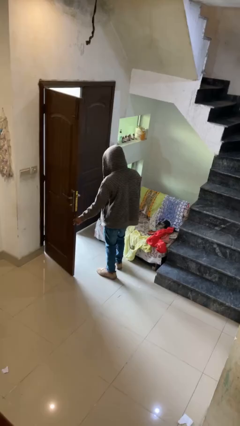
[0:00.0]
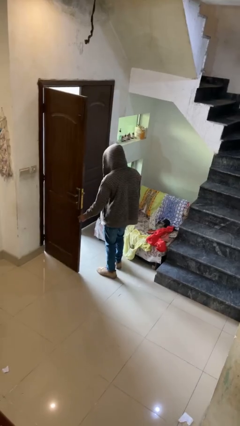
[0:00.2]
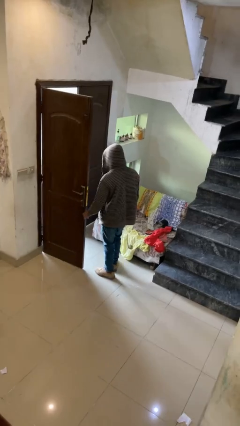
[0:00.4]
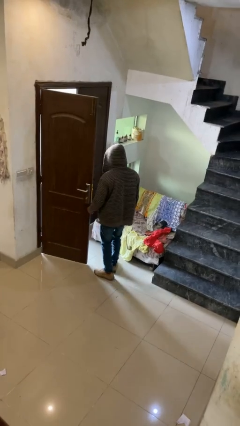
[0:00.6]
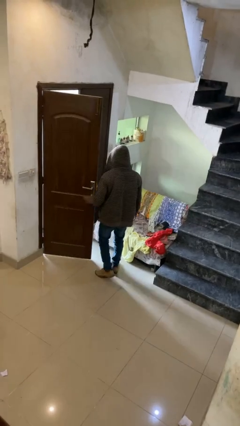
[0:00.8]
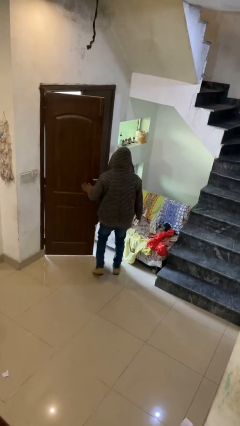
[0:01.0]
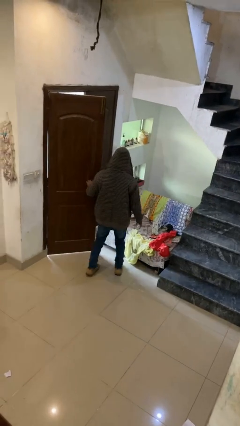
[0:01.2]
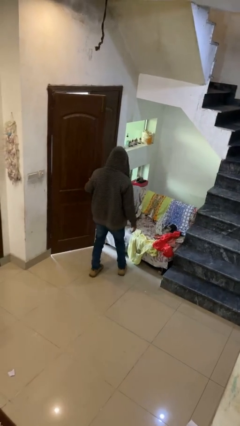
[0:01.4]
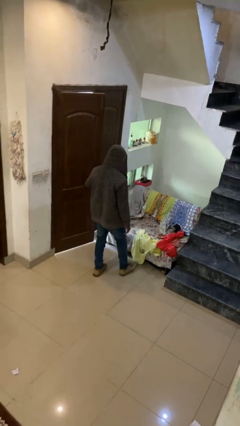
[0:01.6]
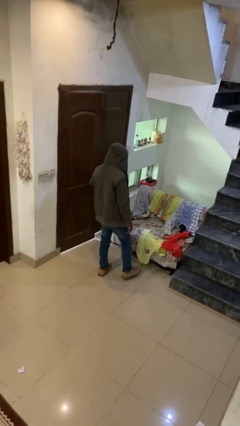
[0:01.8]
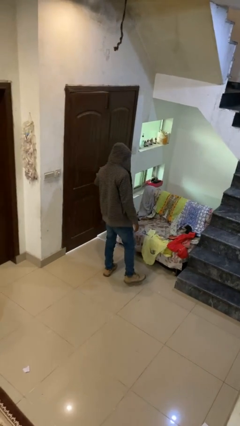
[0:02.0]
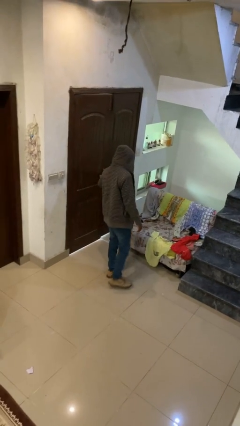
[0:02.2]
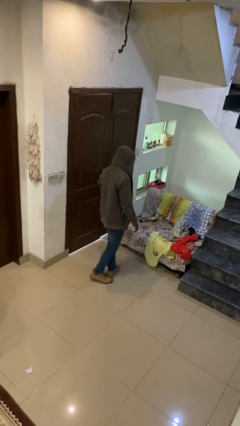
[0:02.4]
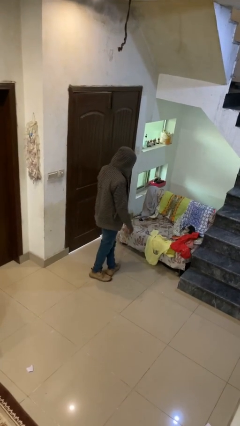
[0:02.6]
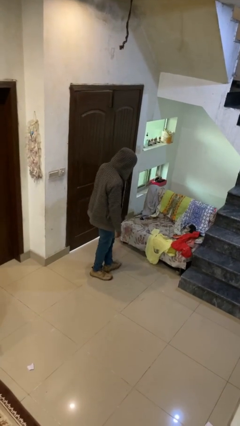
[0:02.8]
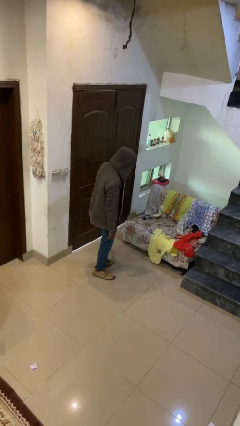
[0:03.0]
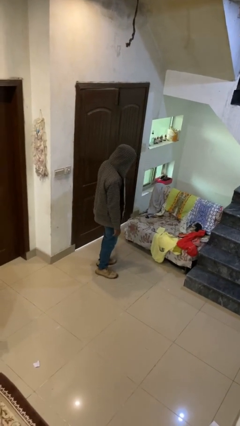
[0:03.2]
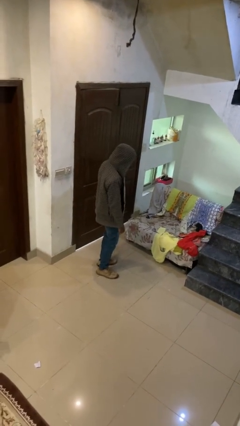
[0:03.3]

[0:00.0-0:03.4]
person closes facility door

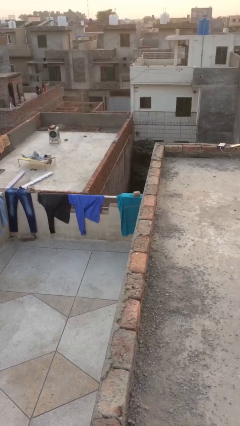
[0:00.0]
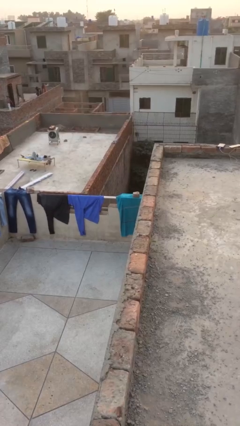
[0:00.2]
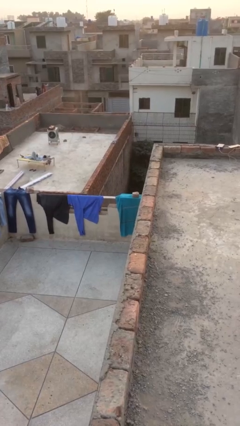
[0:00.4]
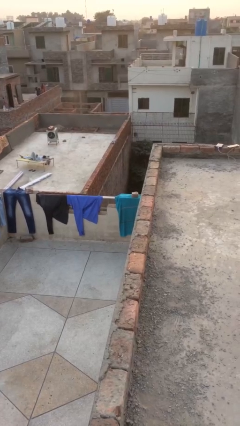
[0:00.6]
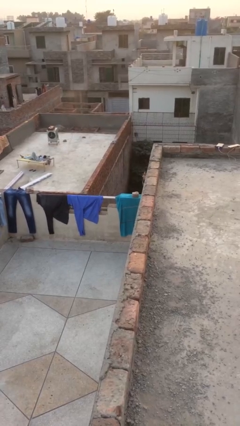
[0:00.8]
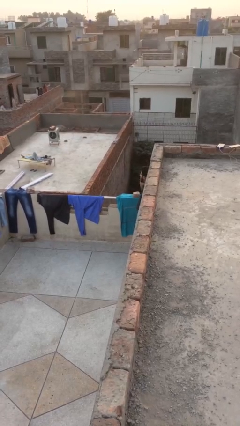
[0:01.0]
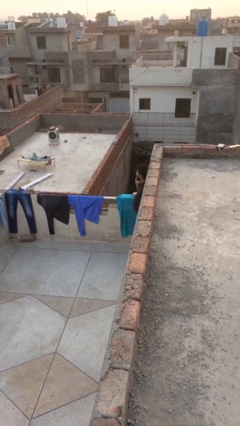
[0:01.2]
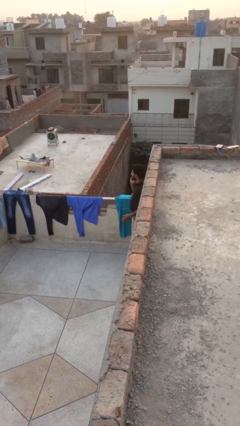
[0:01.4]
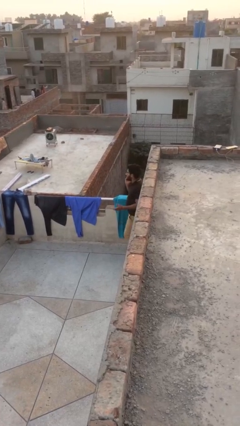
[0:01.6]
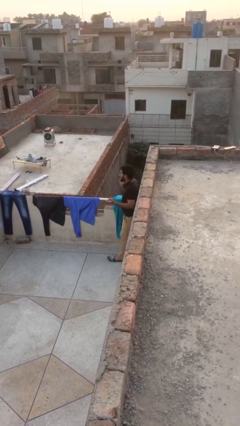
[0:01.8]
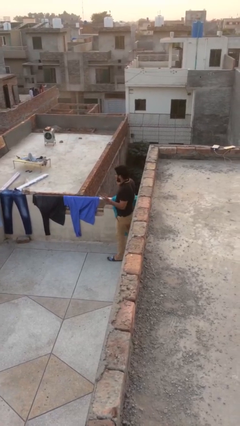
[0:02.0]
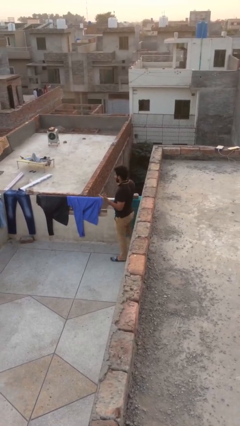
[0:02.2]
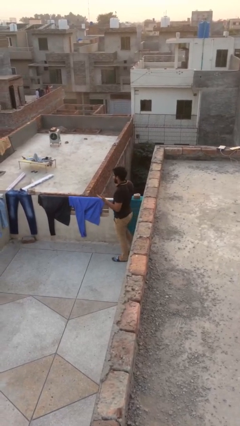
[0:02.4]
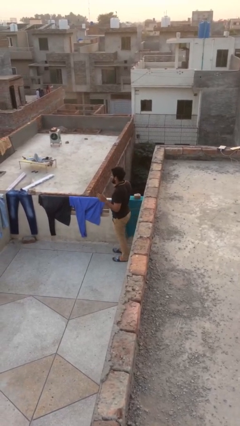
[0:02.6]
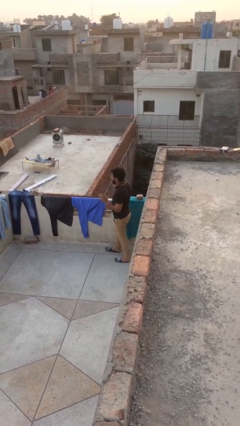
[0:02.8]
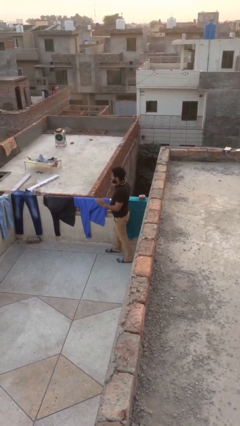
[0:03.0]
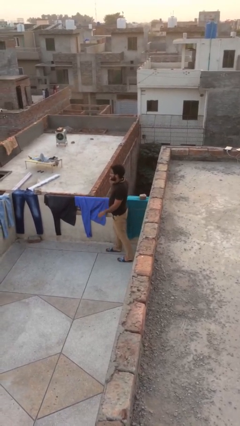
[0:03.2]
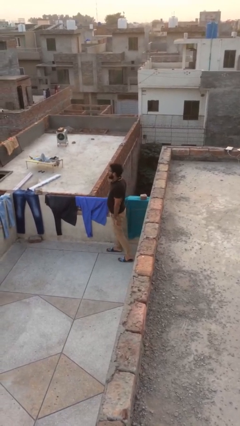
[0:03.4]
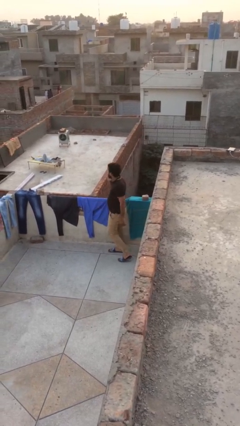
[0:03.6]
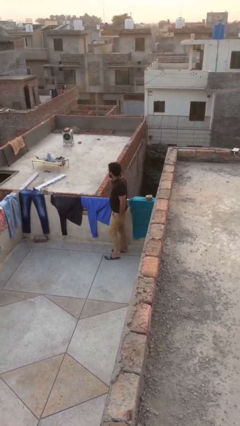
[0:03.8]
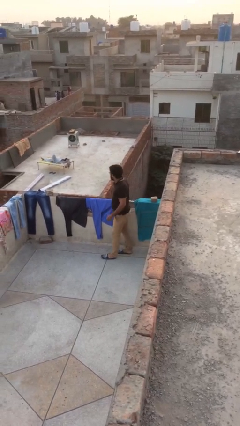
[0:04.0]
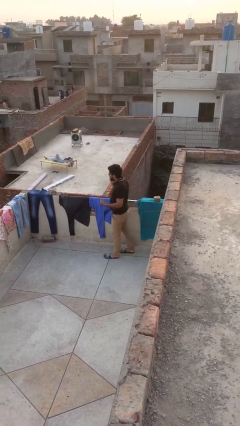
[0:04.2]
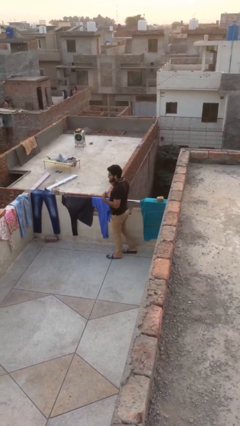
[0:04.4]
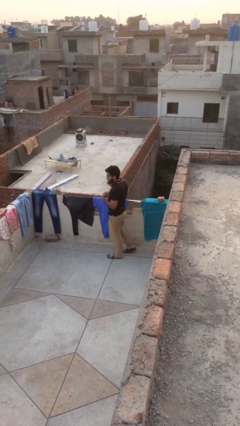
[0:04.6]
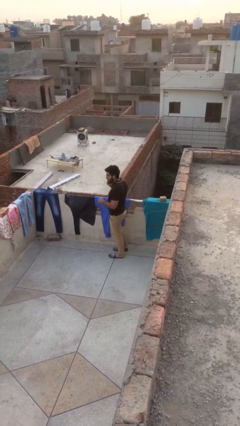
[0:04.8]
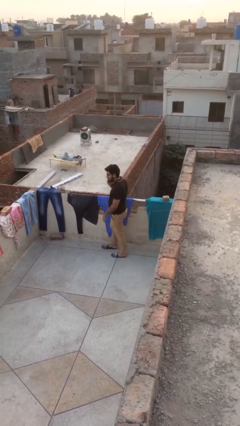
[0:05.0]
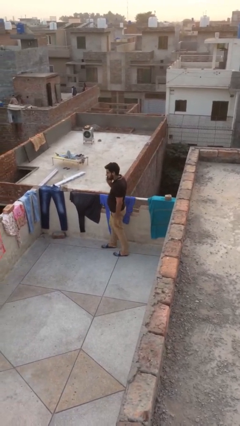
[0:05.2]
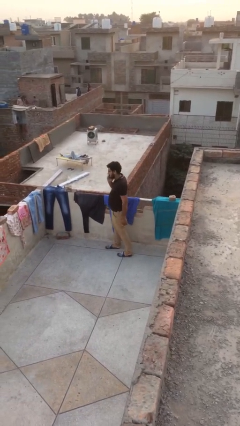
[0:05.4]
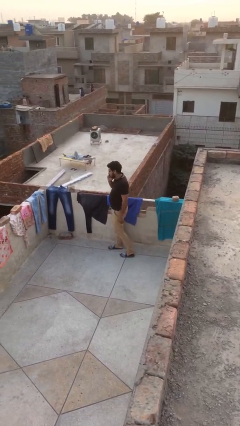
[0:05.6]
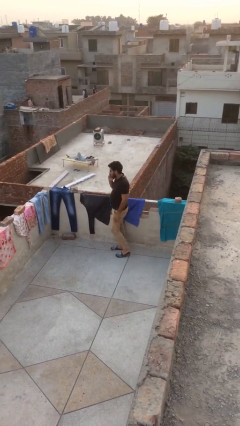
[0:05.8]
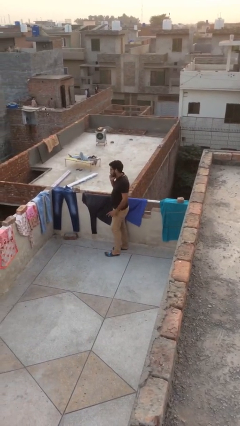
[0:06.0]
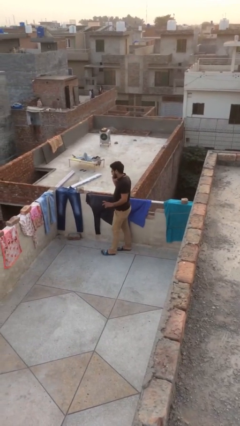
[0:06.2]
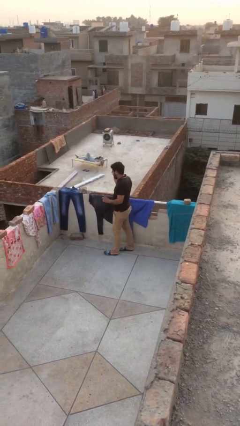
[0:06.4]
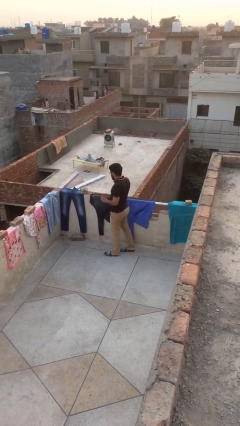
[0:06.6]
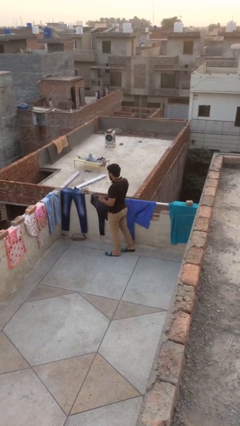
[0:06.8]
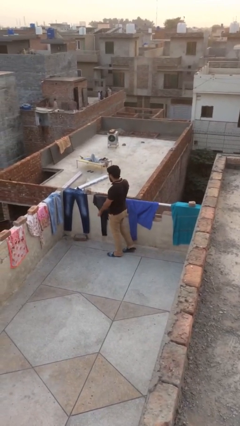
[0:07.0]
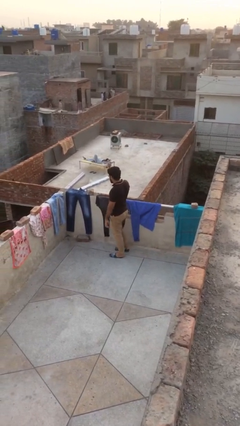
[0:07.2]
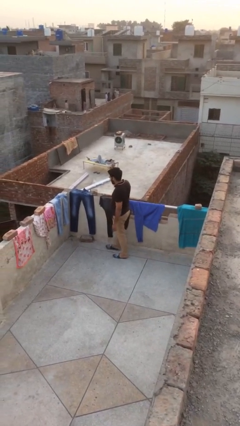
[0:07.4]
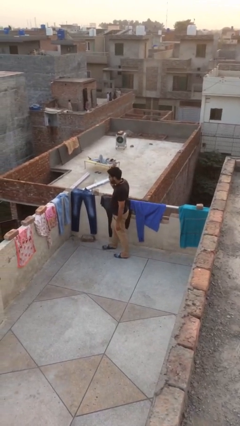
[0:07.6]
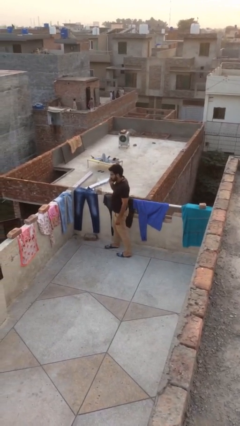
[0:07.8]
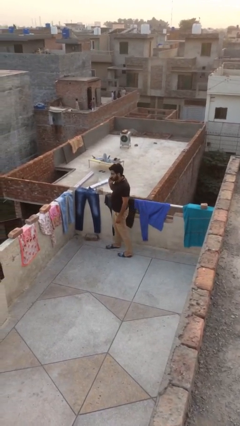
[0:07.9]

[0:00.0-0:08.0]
person enters scene through structure

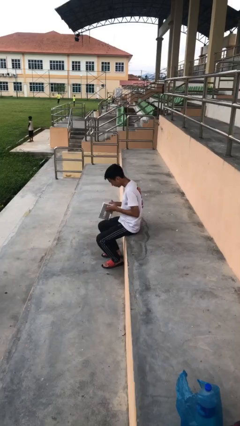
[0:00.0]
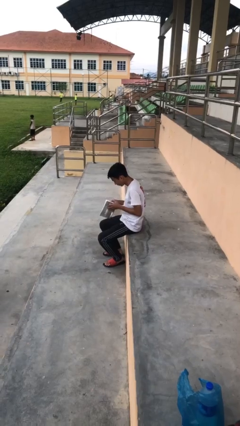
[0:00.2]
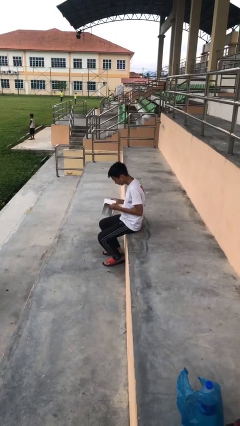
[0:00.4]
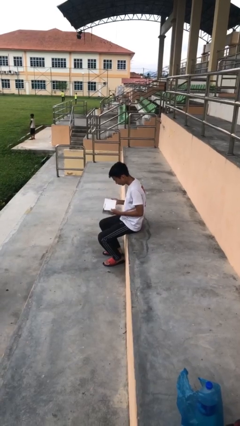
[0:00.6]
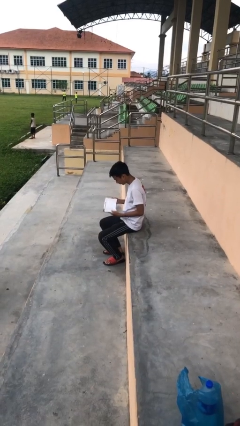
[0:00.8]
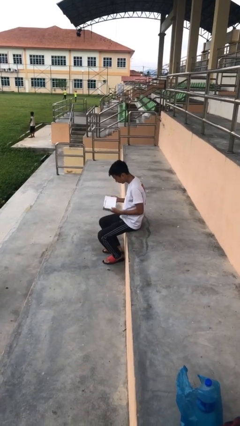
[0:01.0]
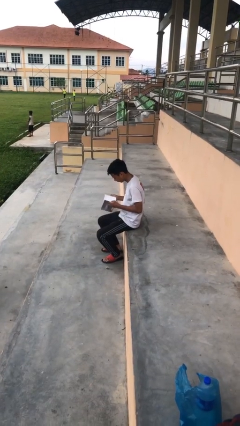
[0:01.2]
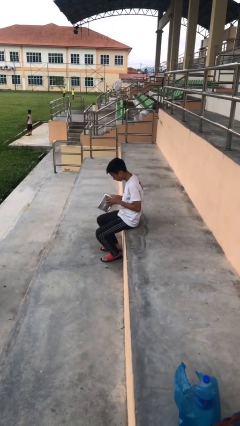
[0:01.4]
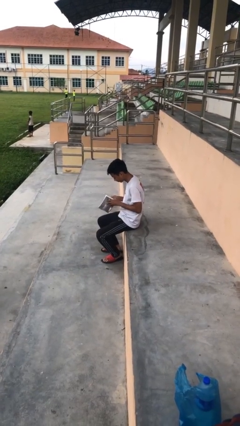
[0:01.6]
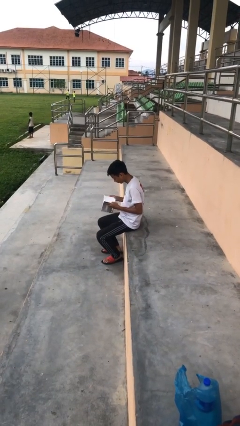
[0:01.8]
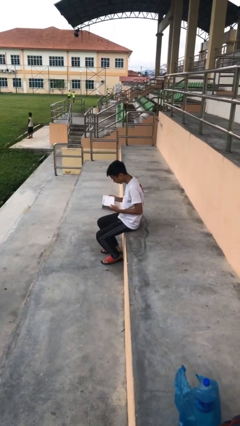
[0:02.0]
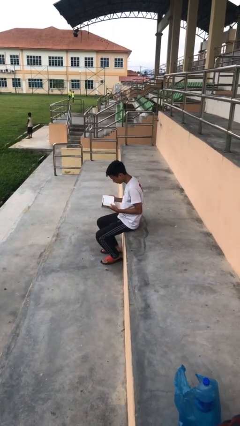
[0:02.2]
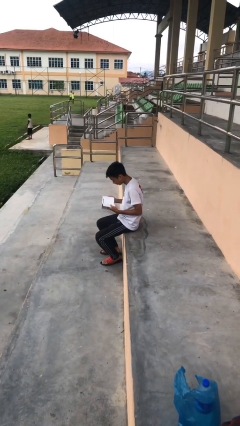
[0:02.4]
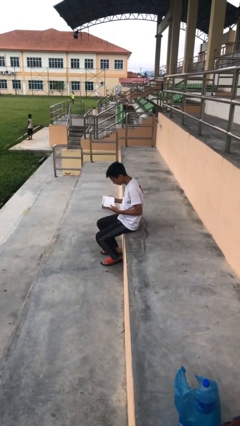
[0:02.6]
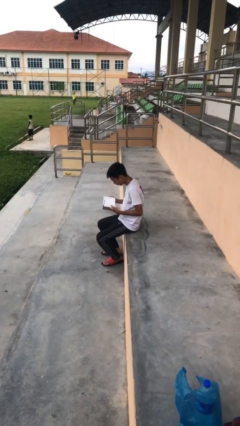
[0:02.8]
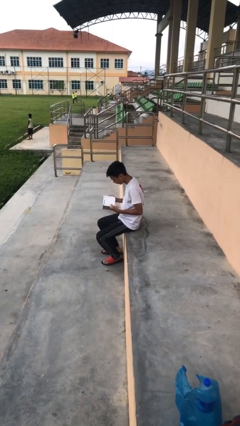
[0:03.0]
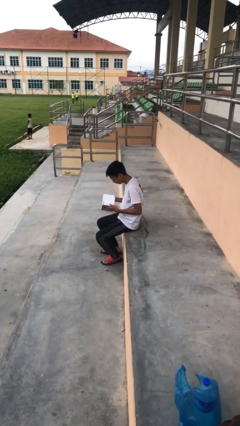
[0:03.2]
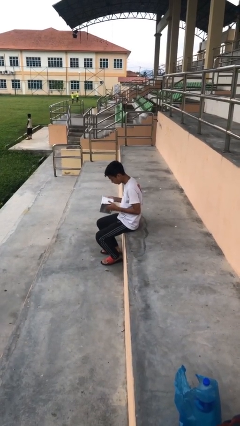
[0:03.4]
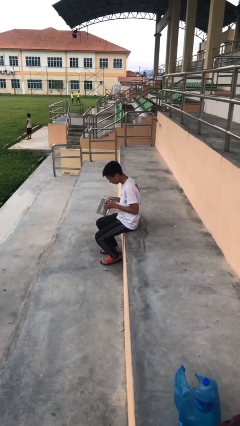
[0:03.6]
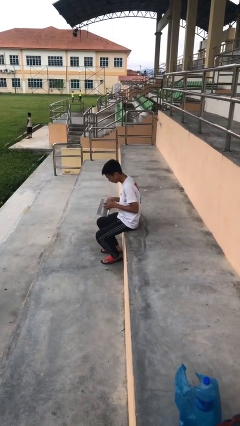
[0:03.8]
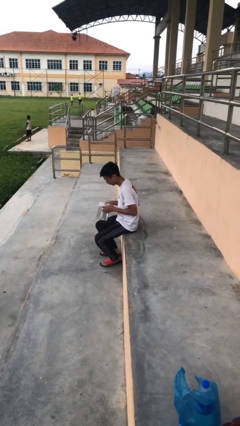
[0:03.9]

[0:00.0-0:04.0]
person reads document

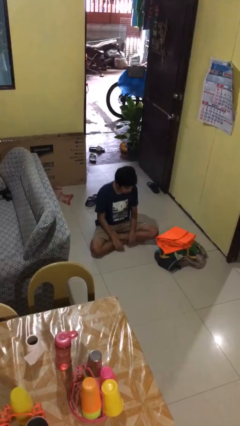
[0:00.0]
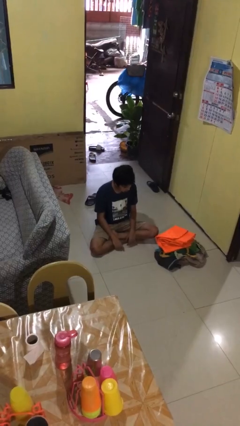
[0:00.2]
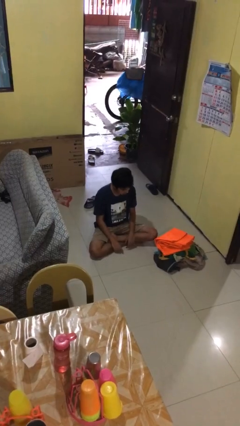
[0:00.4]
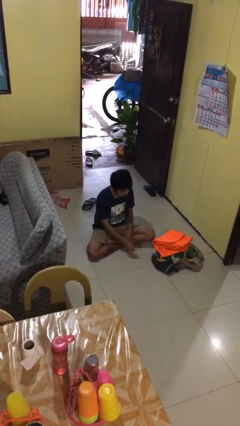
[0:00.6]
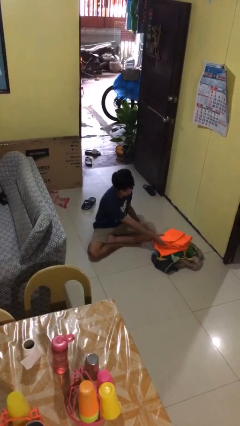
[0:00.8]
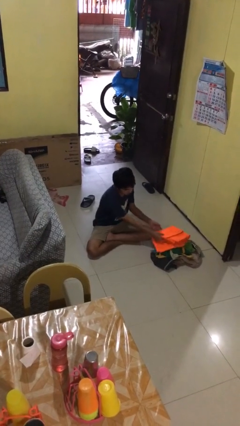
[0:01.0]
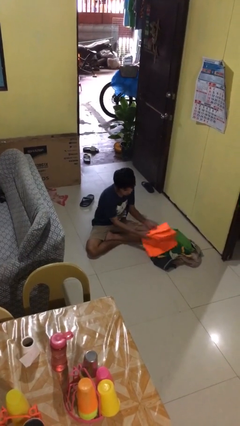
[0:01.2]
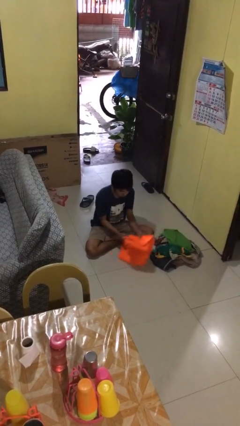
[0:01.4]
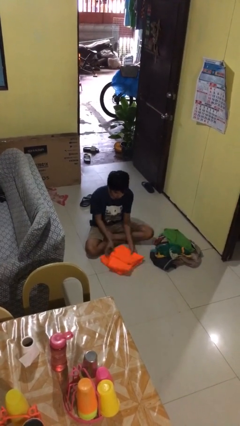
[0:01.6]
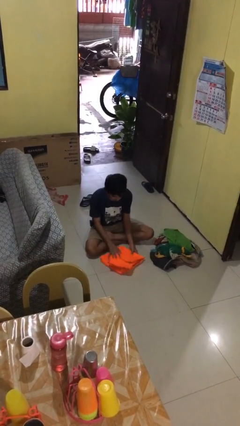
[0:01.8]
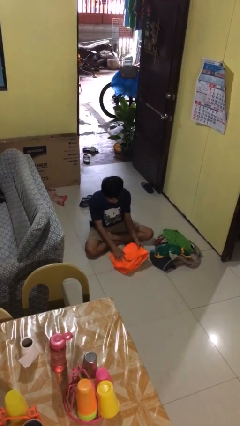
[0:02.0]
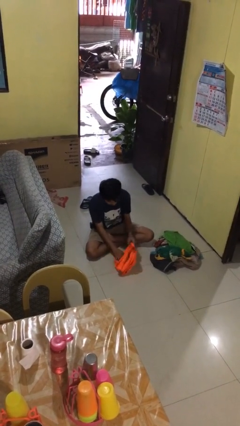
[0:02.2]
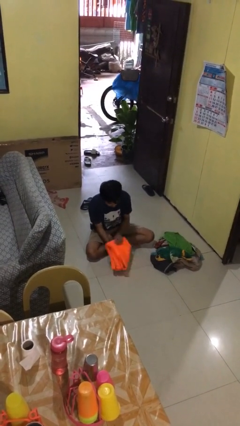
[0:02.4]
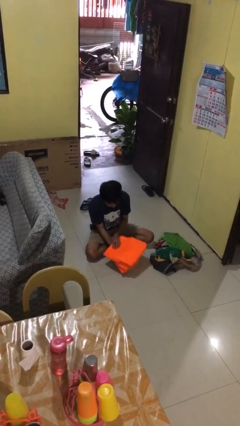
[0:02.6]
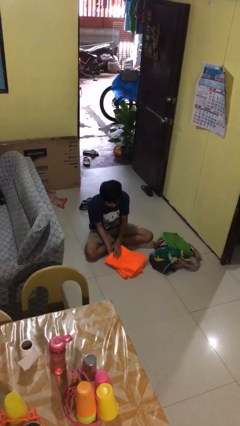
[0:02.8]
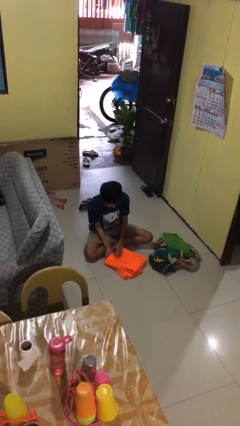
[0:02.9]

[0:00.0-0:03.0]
person folds pants
